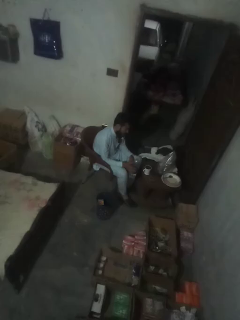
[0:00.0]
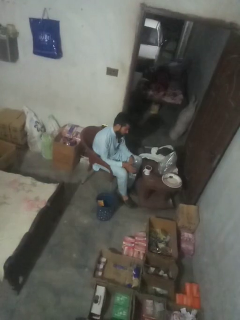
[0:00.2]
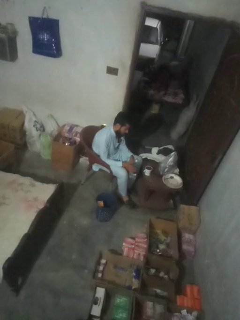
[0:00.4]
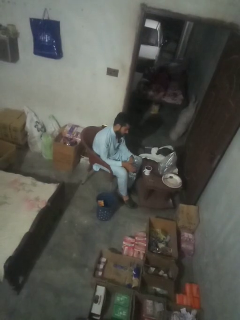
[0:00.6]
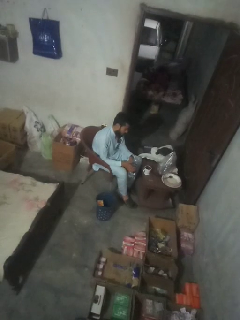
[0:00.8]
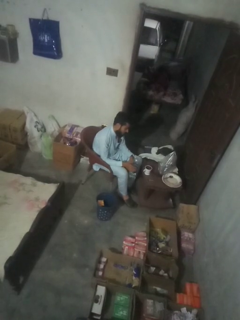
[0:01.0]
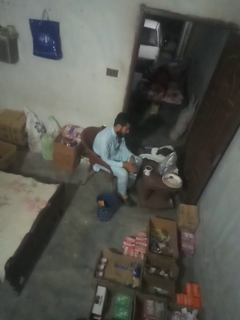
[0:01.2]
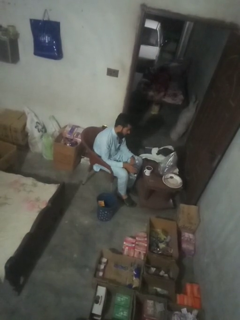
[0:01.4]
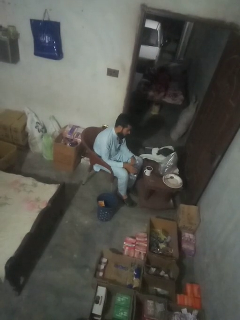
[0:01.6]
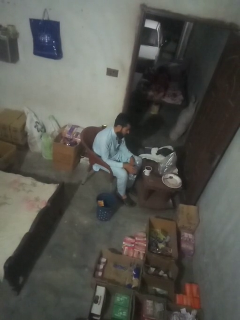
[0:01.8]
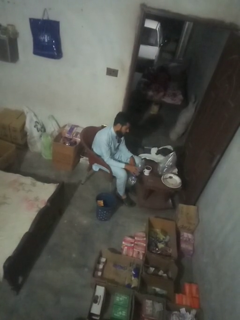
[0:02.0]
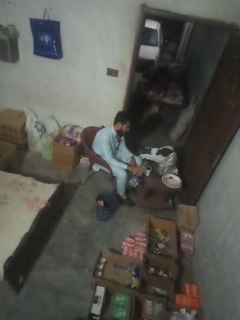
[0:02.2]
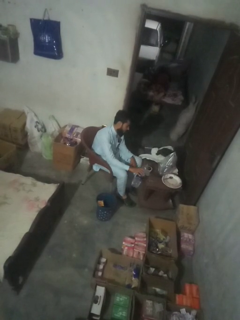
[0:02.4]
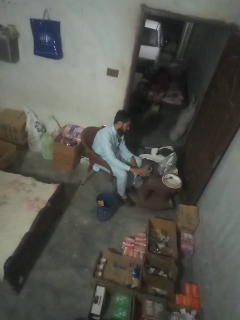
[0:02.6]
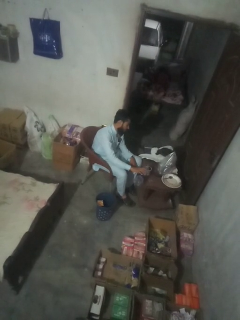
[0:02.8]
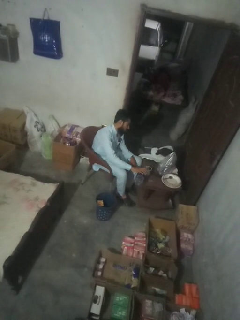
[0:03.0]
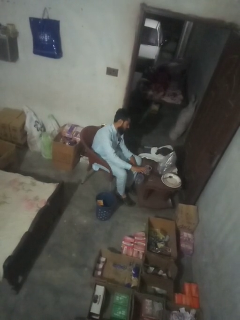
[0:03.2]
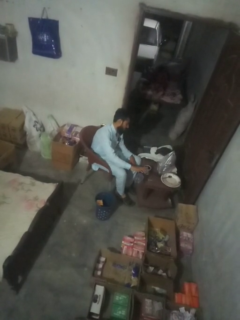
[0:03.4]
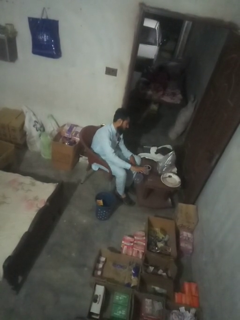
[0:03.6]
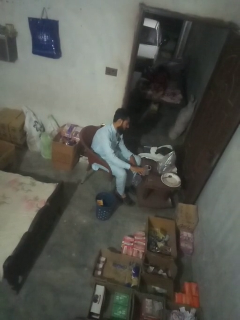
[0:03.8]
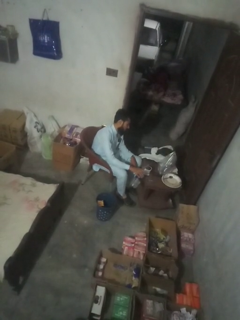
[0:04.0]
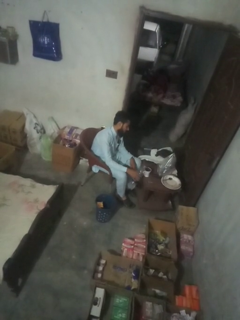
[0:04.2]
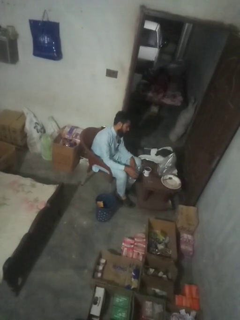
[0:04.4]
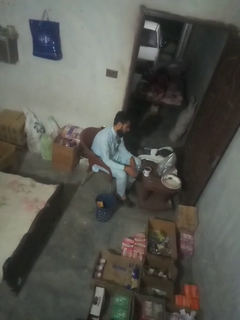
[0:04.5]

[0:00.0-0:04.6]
person pours liquid into cup

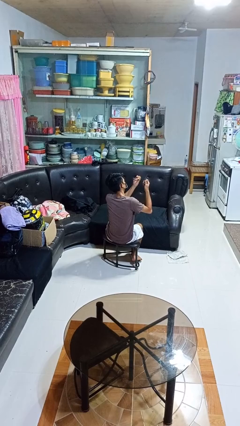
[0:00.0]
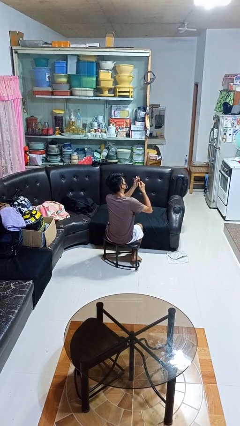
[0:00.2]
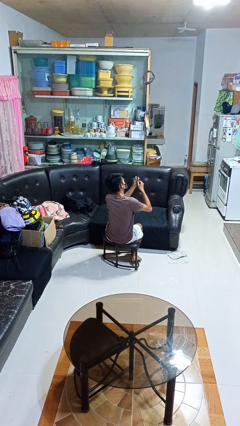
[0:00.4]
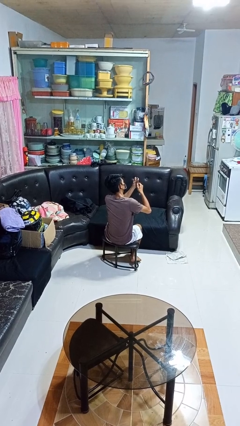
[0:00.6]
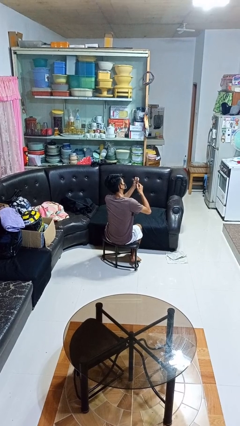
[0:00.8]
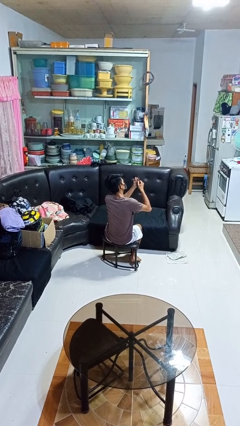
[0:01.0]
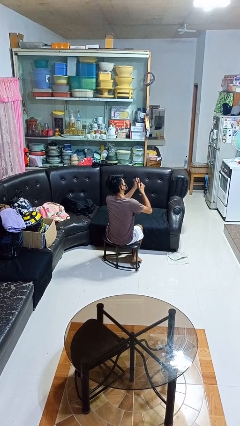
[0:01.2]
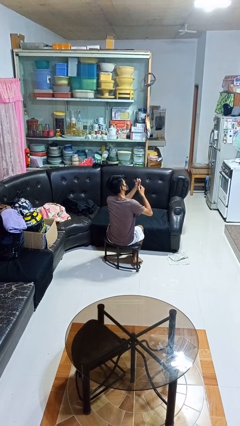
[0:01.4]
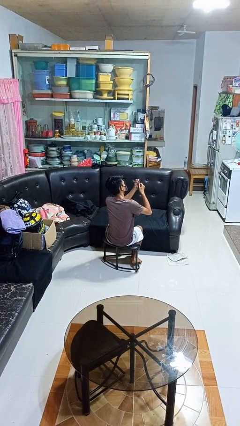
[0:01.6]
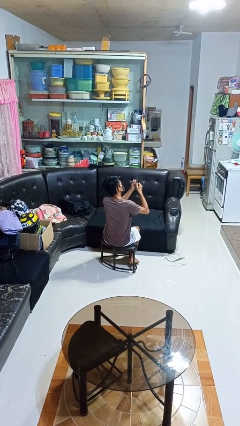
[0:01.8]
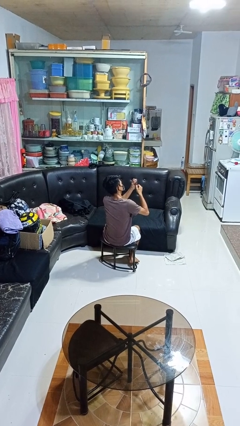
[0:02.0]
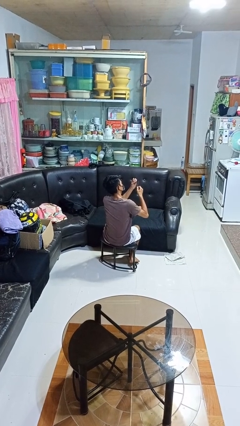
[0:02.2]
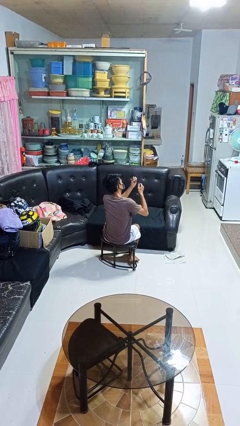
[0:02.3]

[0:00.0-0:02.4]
person files fingernails

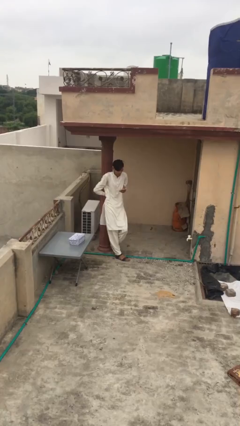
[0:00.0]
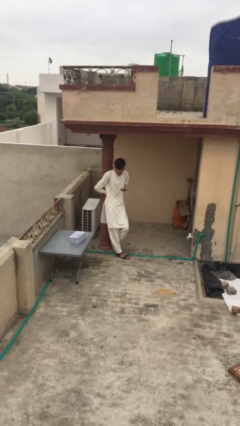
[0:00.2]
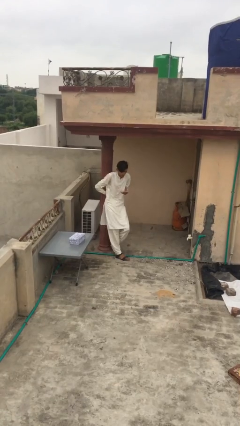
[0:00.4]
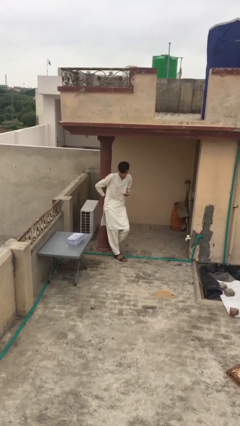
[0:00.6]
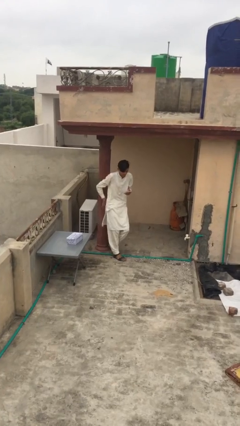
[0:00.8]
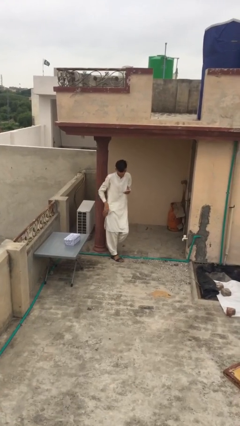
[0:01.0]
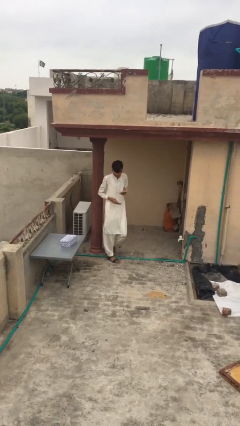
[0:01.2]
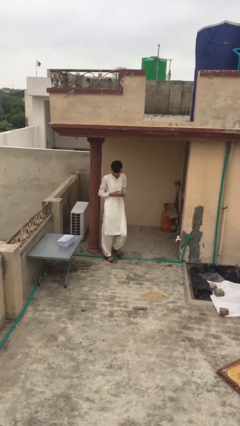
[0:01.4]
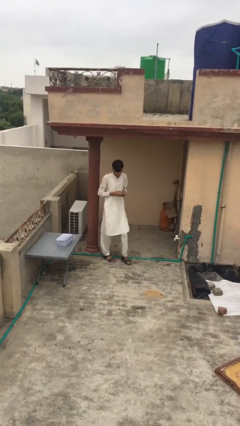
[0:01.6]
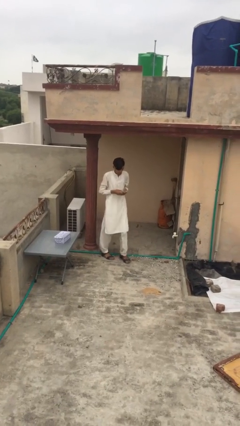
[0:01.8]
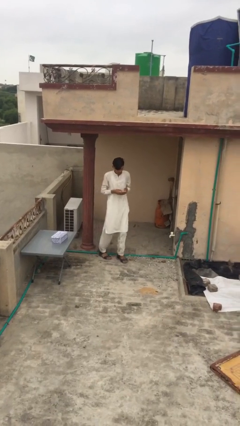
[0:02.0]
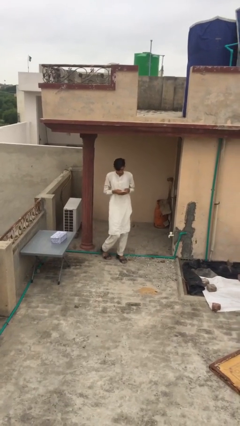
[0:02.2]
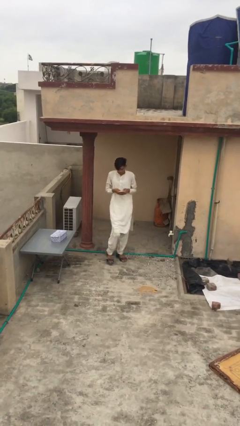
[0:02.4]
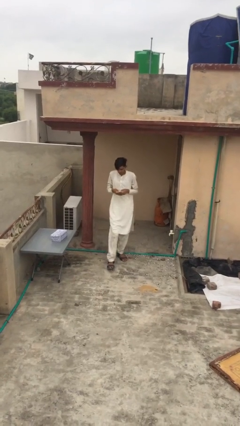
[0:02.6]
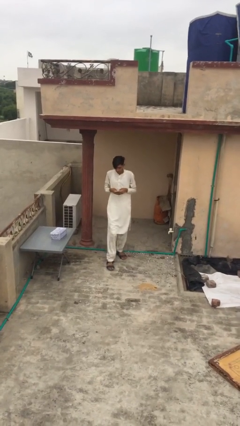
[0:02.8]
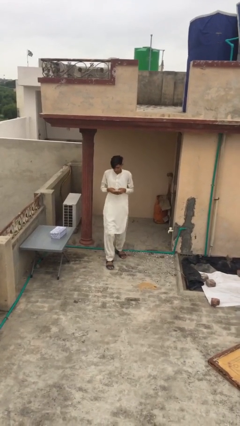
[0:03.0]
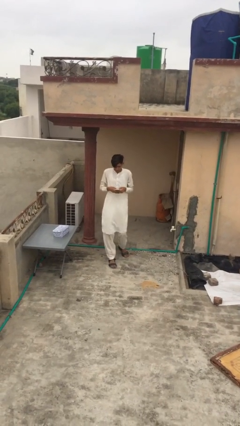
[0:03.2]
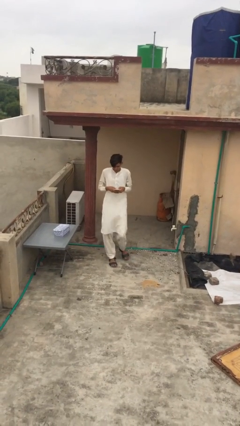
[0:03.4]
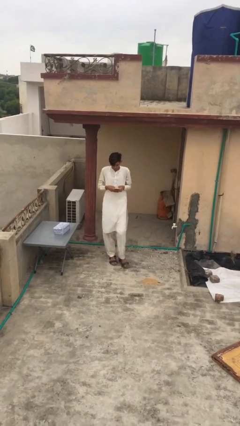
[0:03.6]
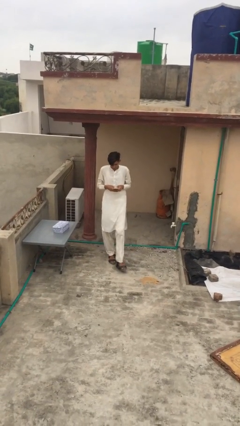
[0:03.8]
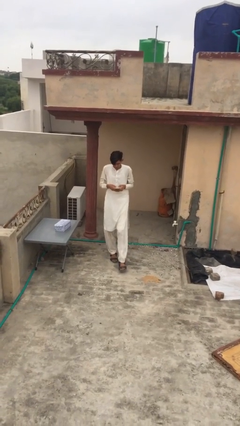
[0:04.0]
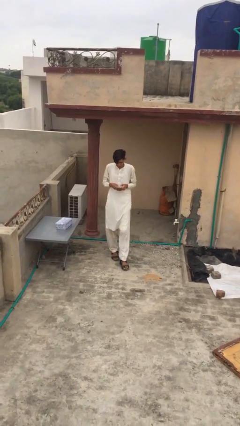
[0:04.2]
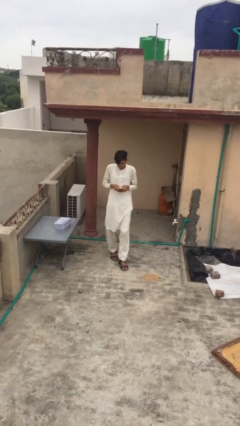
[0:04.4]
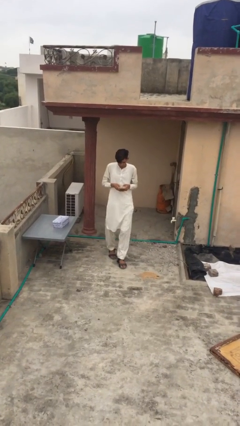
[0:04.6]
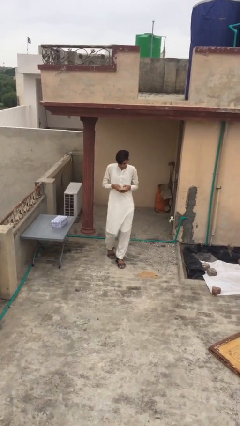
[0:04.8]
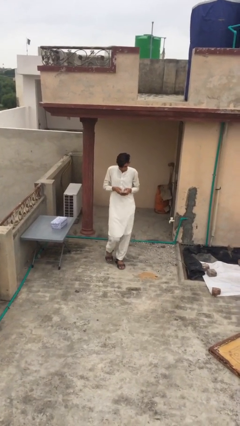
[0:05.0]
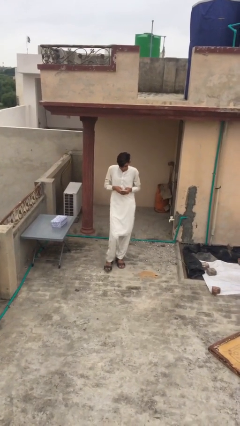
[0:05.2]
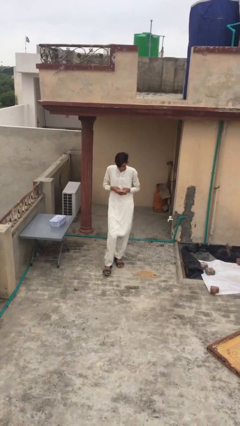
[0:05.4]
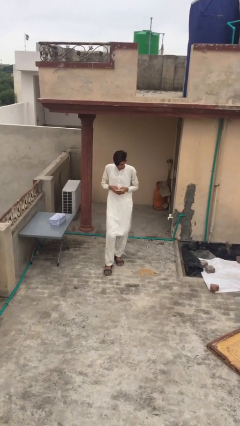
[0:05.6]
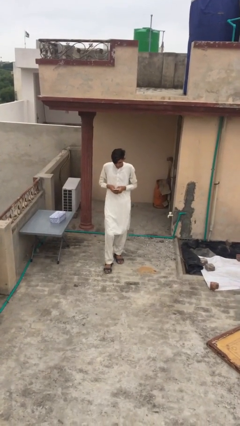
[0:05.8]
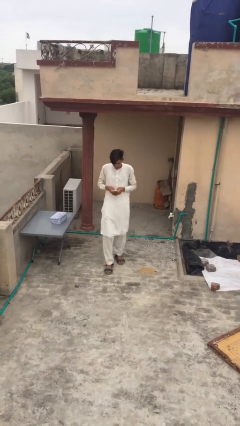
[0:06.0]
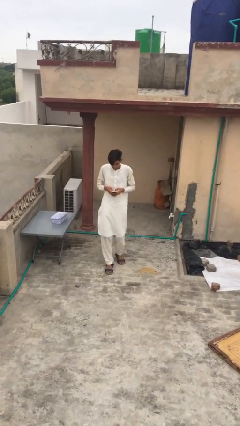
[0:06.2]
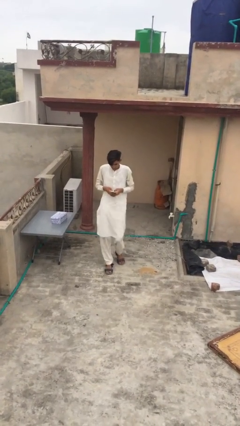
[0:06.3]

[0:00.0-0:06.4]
person texts on phone

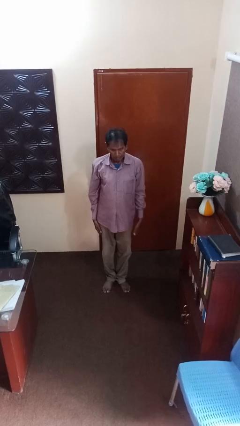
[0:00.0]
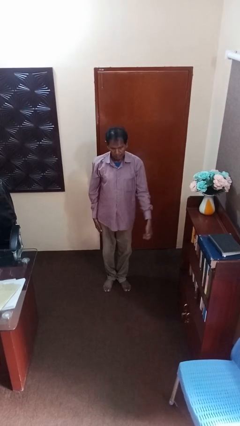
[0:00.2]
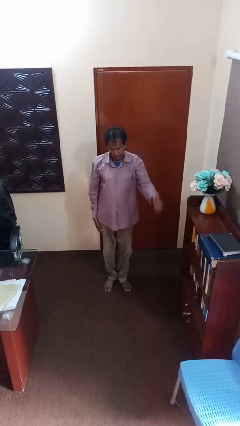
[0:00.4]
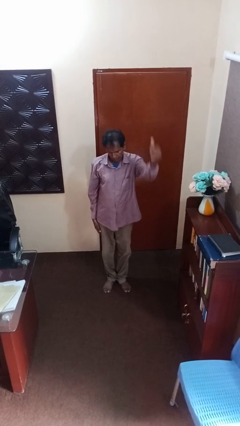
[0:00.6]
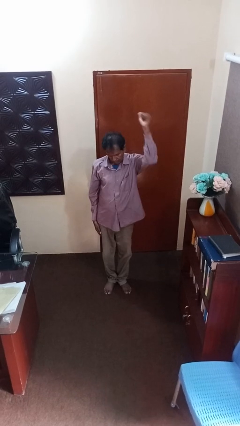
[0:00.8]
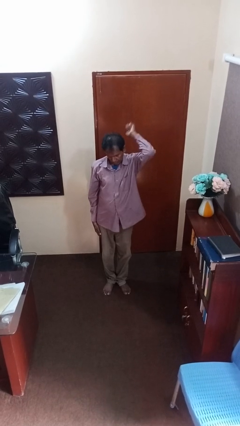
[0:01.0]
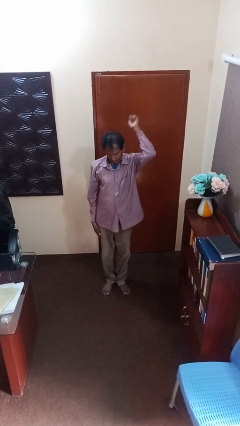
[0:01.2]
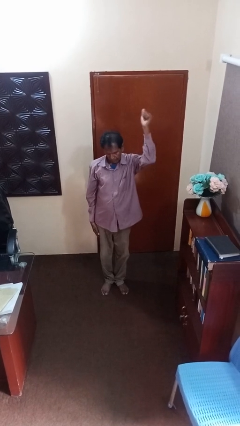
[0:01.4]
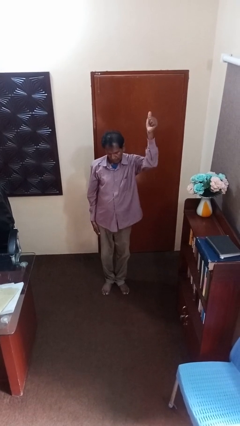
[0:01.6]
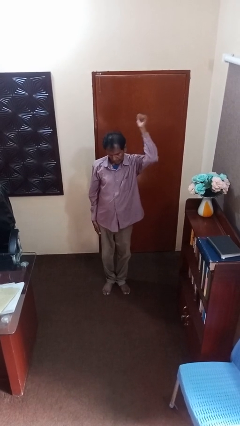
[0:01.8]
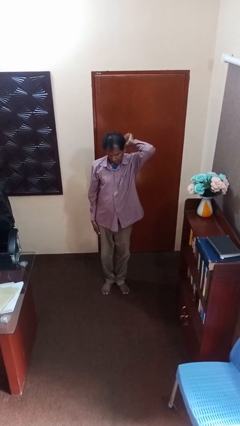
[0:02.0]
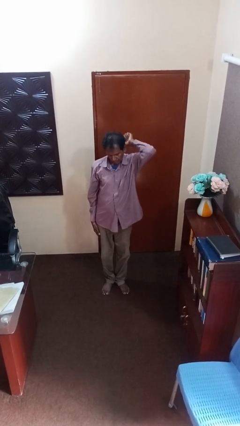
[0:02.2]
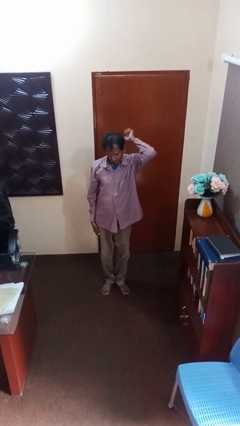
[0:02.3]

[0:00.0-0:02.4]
person gestures behind me

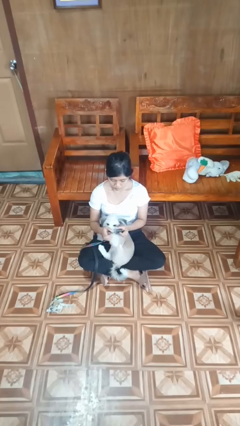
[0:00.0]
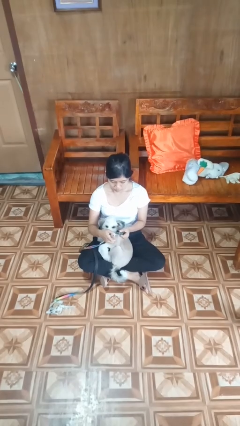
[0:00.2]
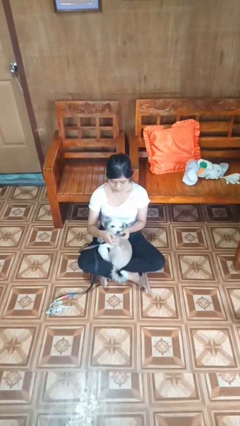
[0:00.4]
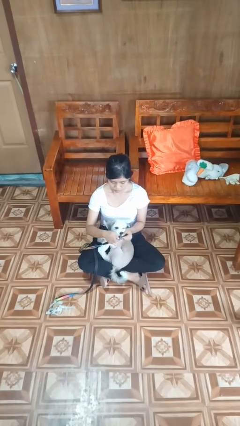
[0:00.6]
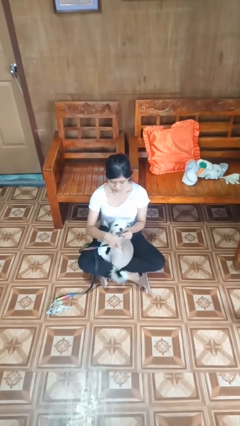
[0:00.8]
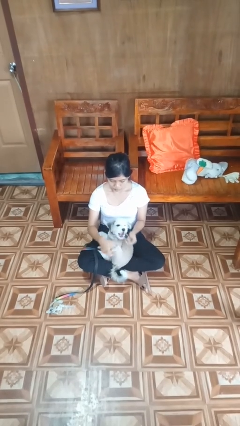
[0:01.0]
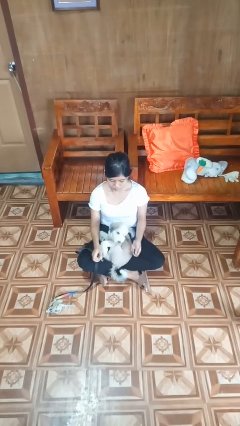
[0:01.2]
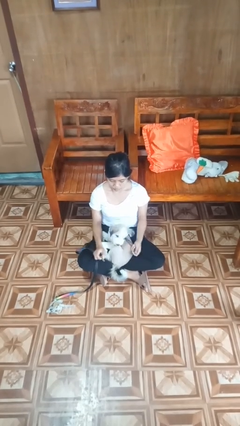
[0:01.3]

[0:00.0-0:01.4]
person unattaches leash from dog

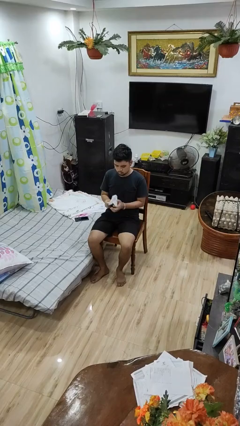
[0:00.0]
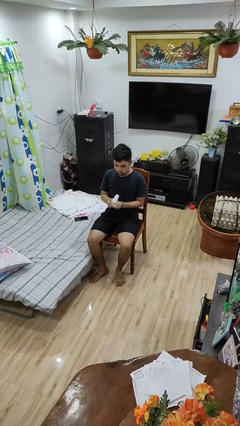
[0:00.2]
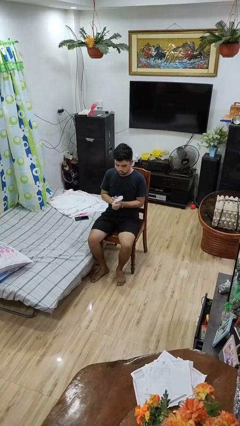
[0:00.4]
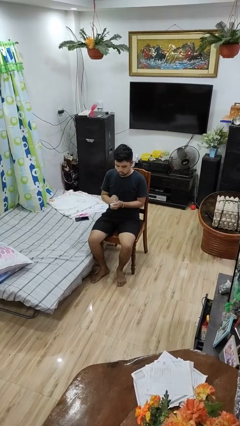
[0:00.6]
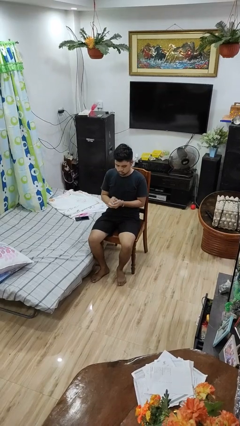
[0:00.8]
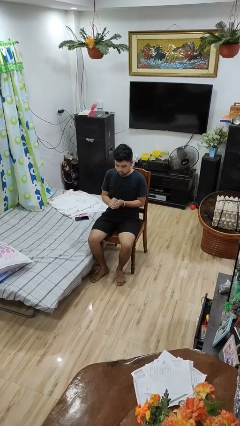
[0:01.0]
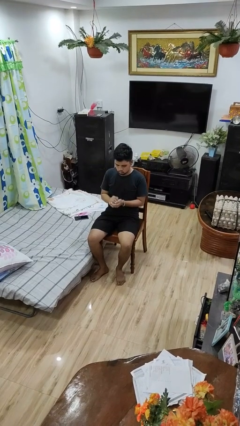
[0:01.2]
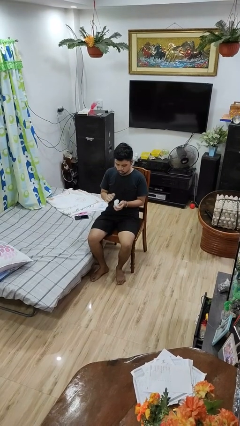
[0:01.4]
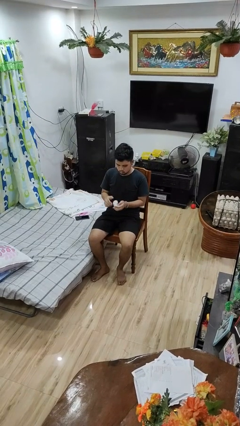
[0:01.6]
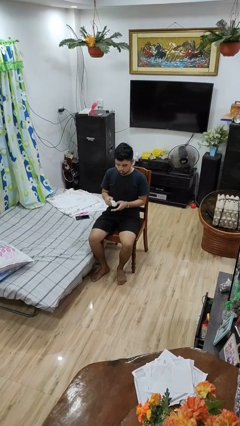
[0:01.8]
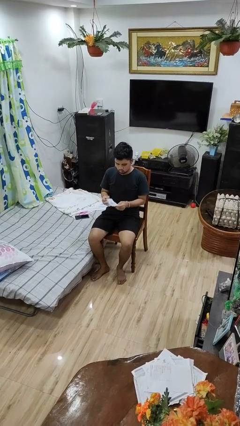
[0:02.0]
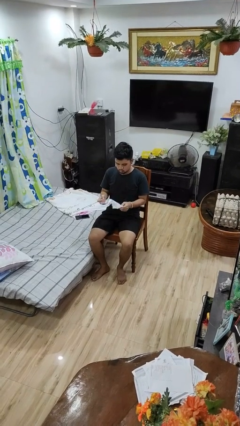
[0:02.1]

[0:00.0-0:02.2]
person crumples paper
